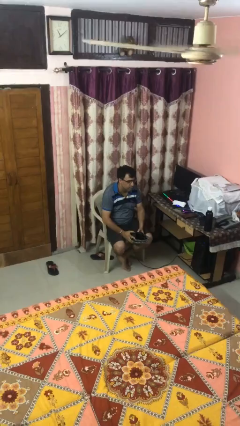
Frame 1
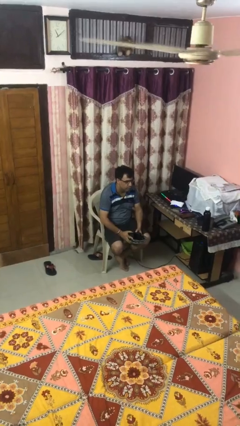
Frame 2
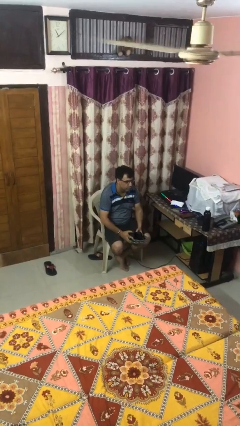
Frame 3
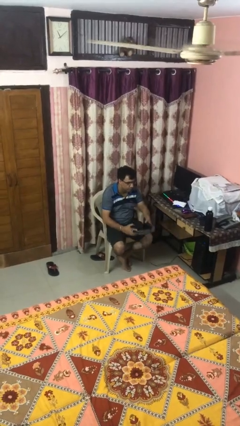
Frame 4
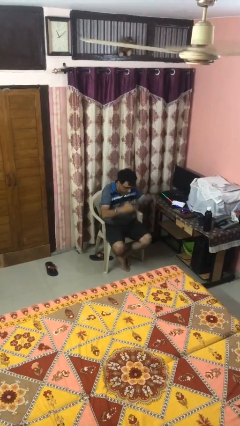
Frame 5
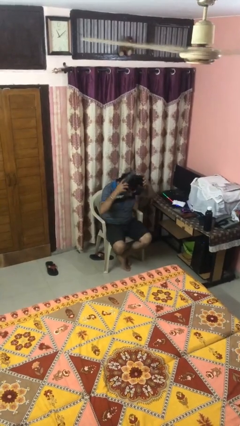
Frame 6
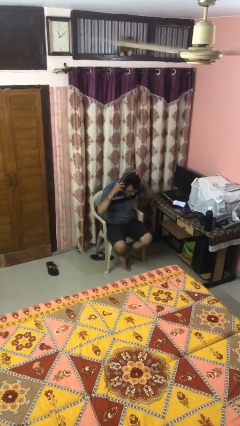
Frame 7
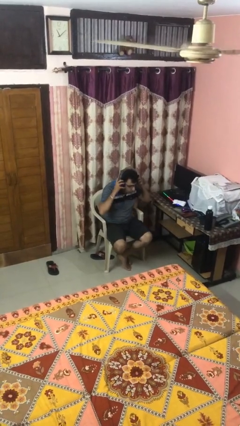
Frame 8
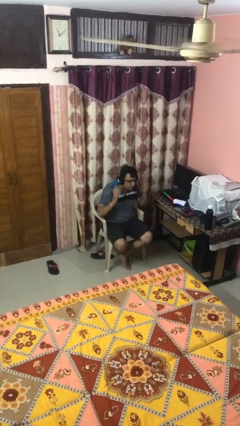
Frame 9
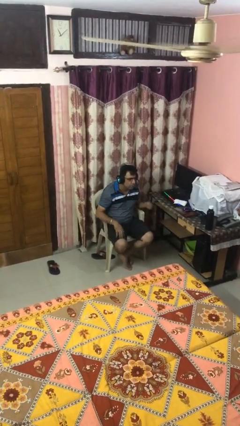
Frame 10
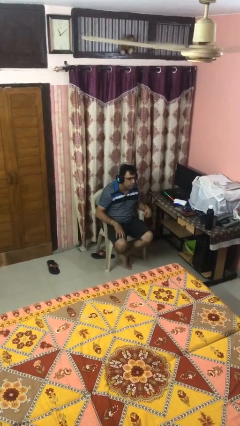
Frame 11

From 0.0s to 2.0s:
person puts on headphones

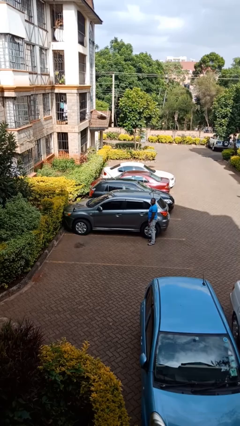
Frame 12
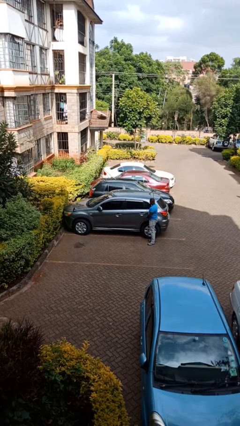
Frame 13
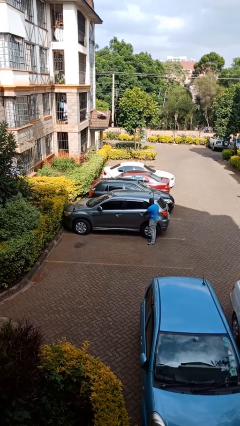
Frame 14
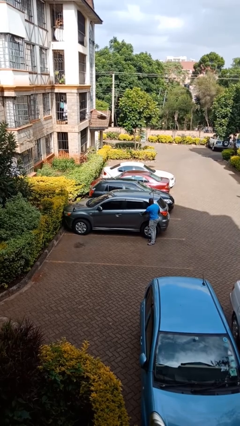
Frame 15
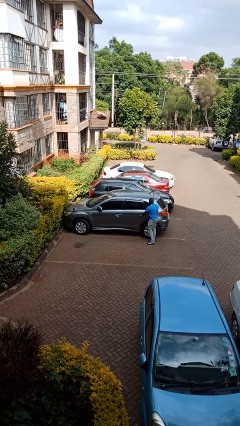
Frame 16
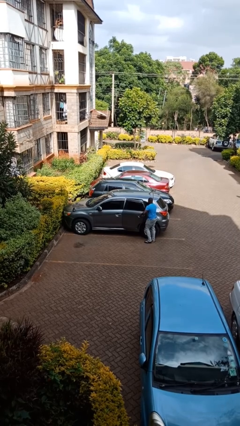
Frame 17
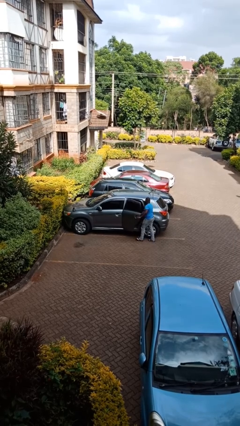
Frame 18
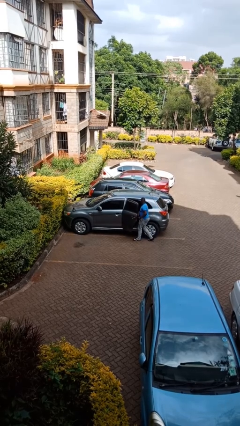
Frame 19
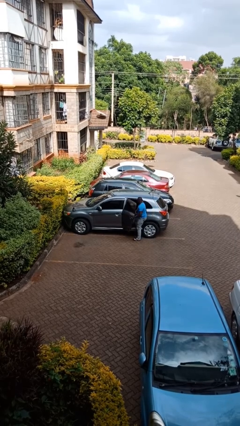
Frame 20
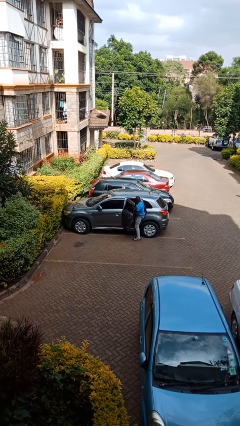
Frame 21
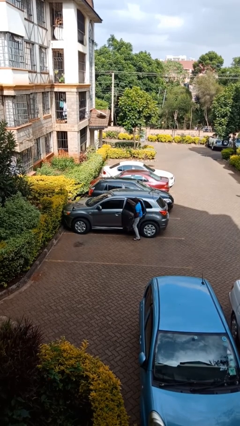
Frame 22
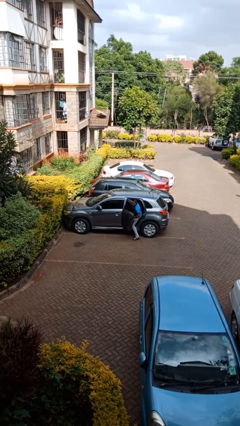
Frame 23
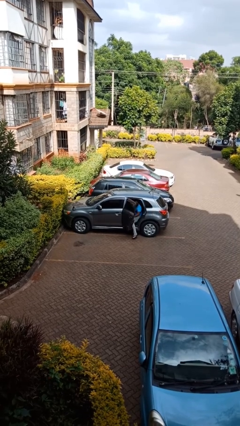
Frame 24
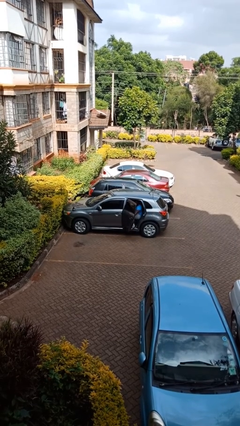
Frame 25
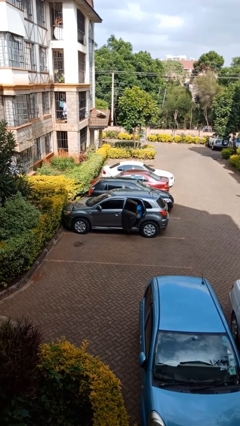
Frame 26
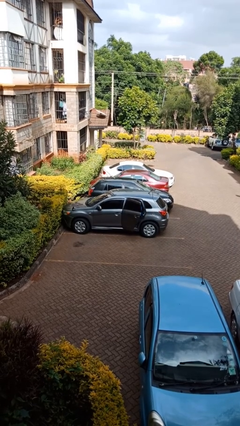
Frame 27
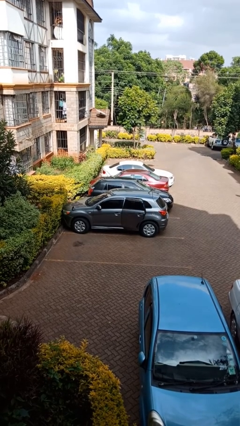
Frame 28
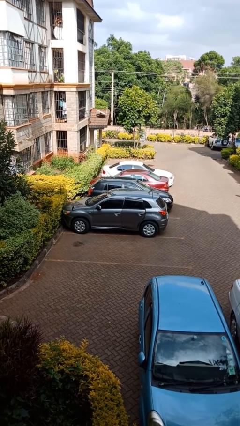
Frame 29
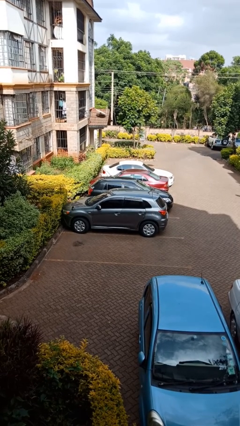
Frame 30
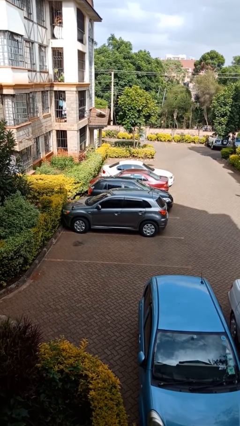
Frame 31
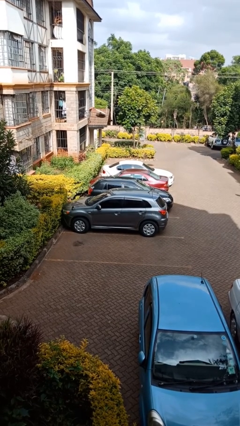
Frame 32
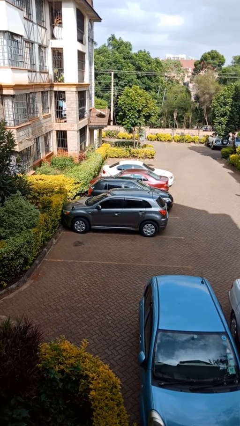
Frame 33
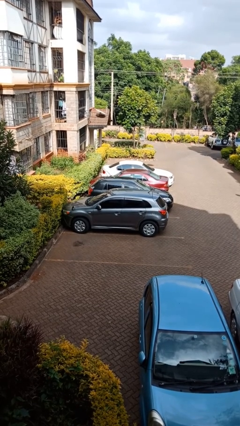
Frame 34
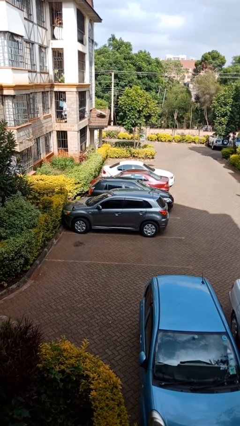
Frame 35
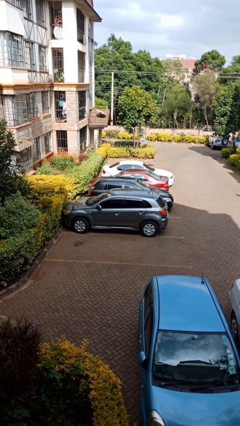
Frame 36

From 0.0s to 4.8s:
car picks up person

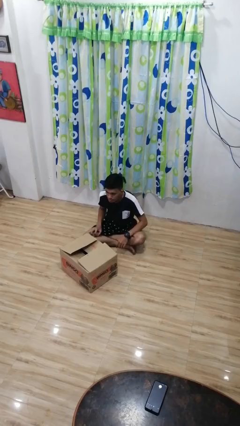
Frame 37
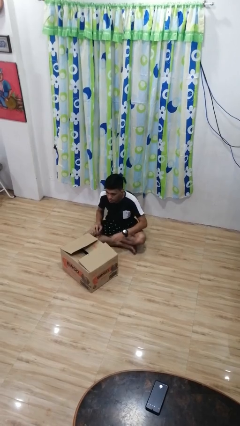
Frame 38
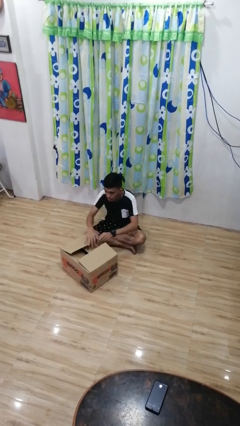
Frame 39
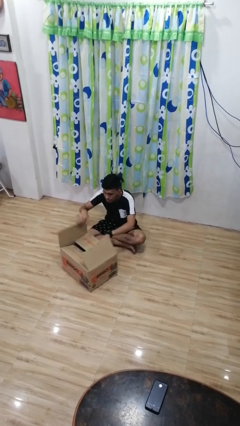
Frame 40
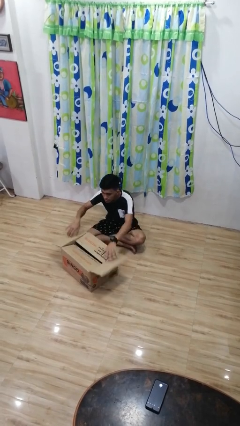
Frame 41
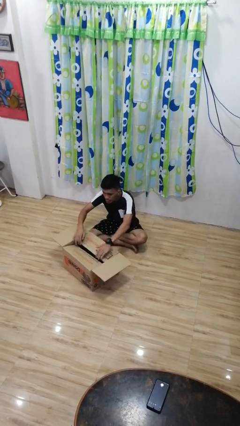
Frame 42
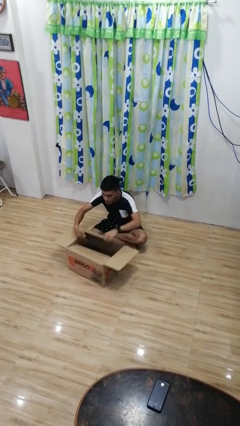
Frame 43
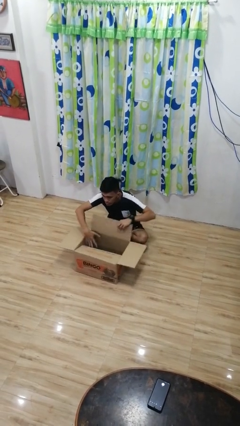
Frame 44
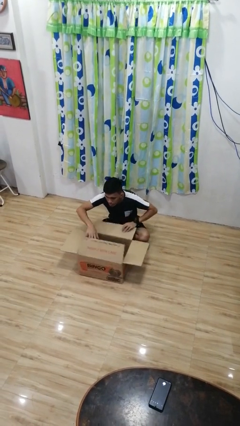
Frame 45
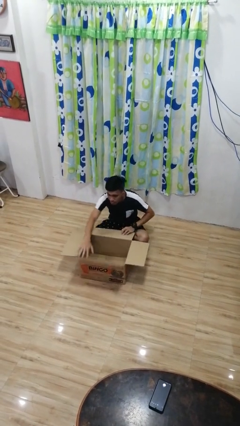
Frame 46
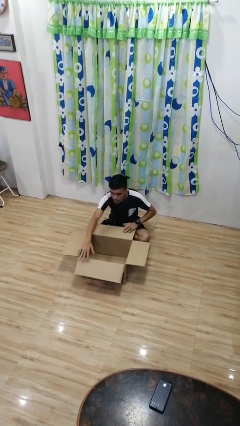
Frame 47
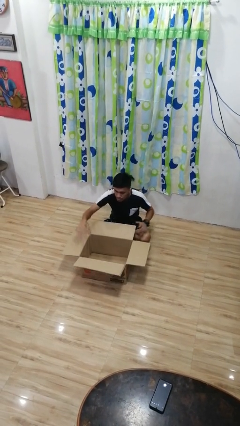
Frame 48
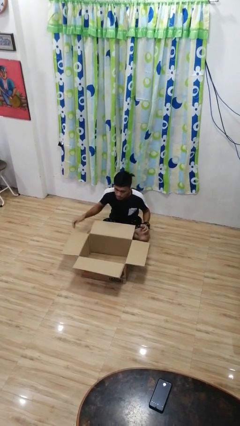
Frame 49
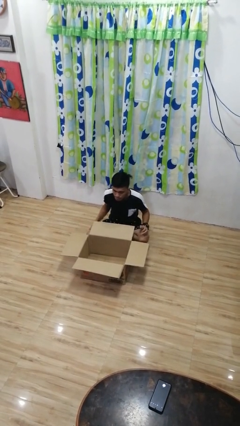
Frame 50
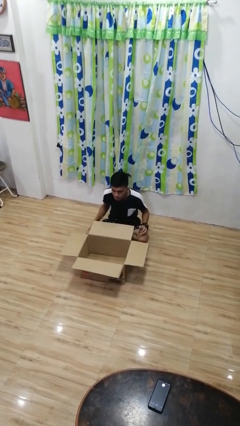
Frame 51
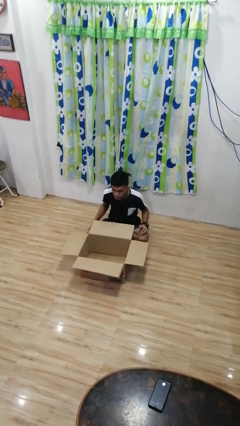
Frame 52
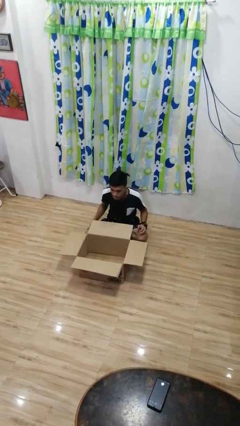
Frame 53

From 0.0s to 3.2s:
person opens box

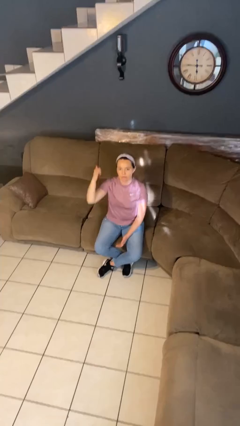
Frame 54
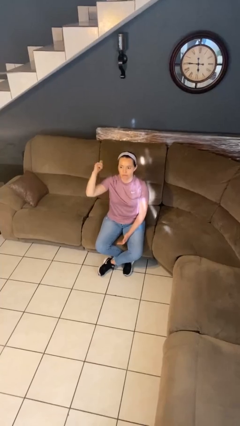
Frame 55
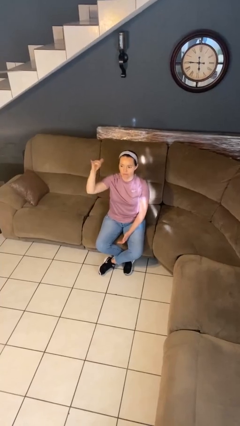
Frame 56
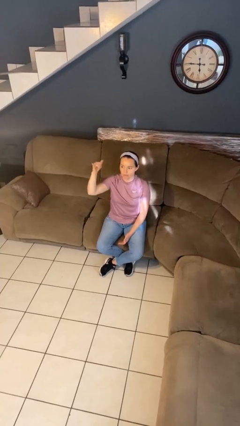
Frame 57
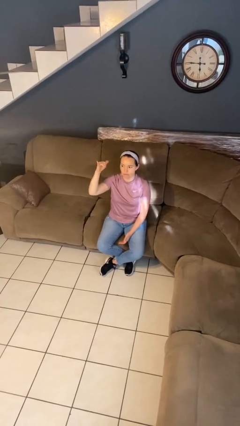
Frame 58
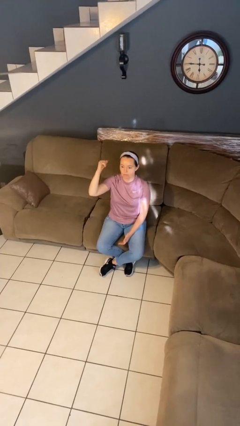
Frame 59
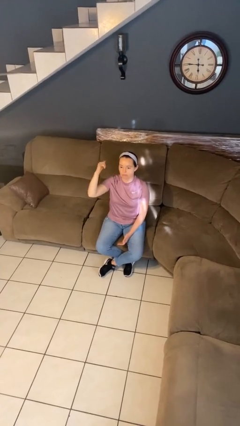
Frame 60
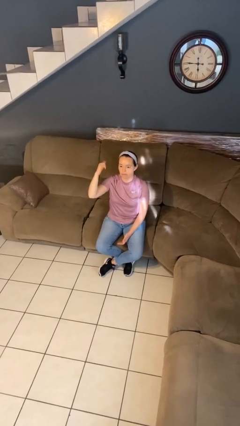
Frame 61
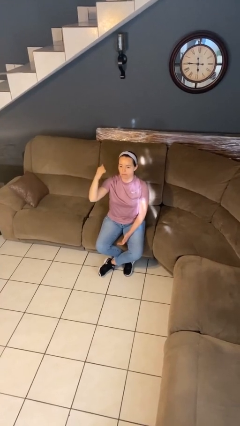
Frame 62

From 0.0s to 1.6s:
person gestures hang loose

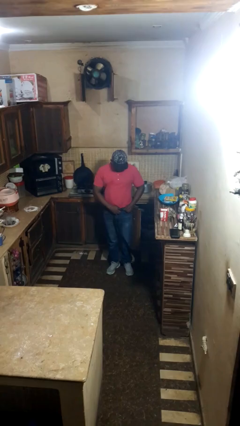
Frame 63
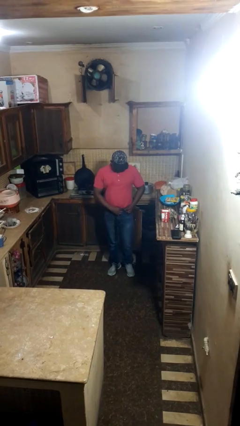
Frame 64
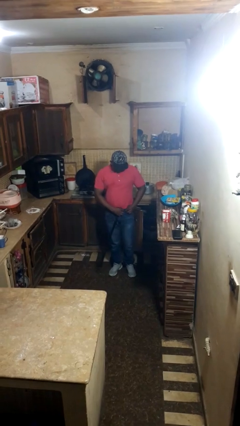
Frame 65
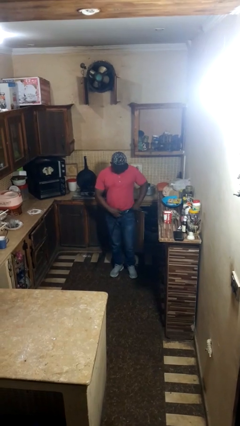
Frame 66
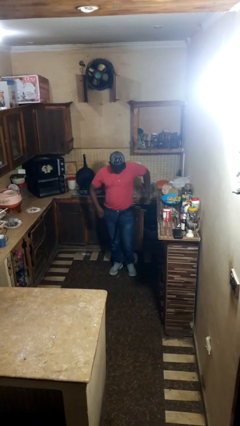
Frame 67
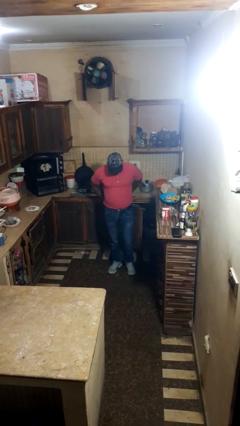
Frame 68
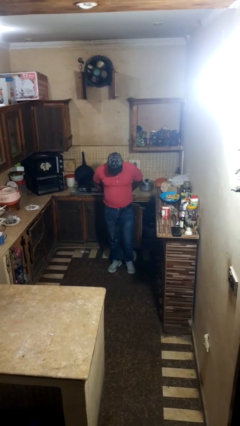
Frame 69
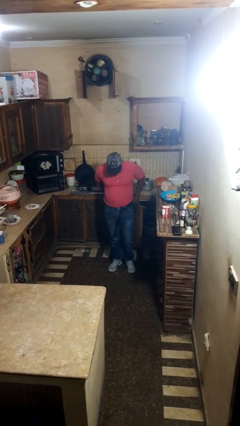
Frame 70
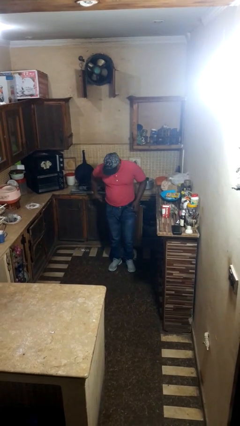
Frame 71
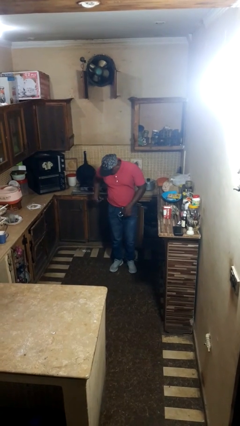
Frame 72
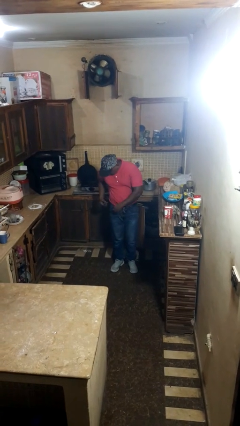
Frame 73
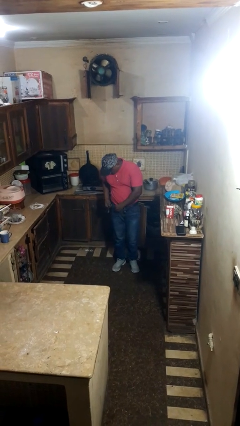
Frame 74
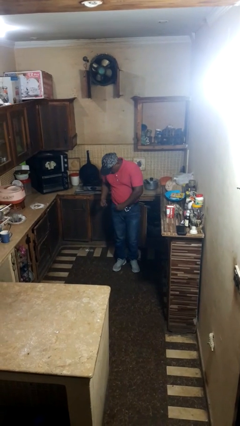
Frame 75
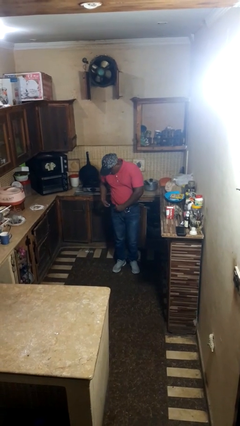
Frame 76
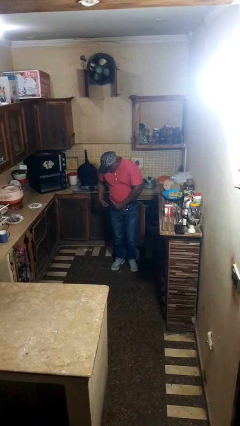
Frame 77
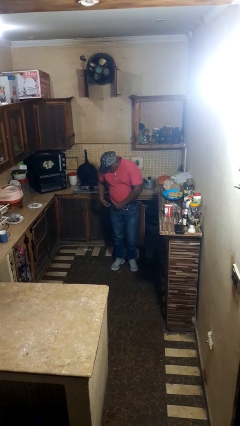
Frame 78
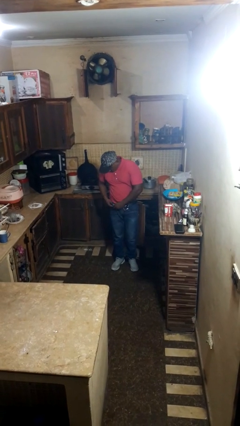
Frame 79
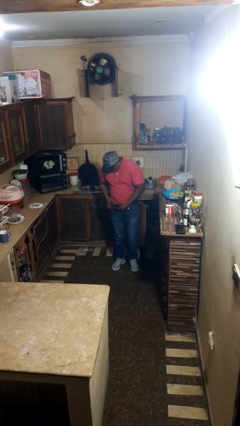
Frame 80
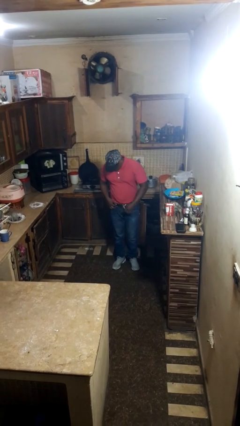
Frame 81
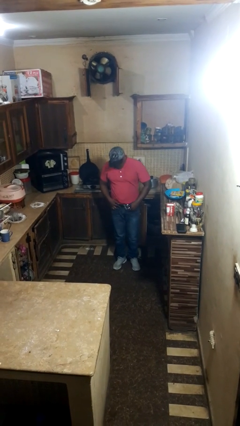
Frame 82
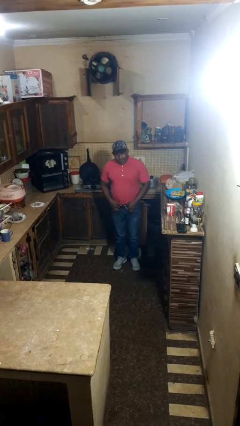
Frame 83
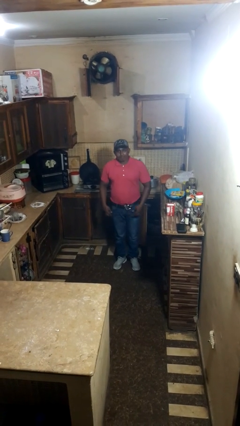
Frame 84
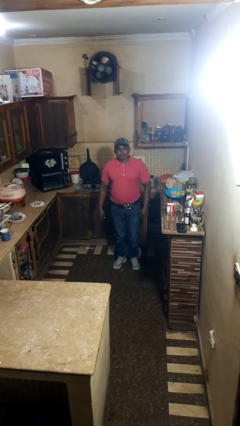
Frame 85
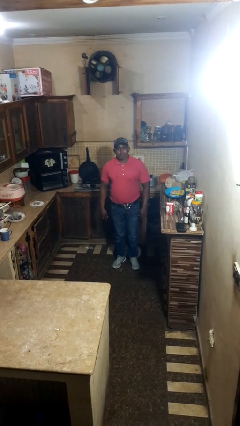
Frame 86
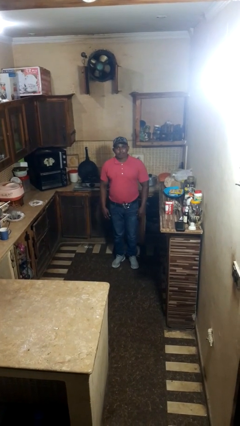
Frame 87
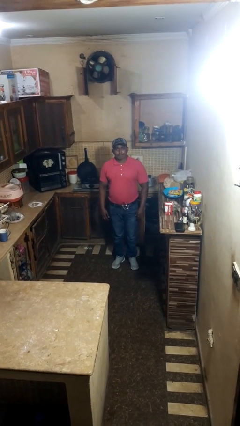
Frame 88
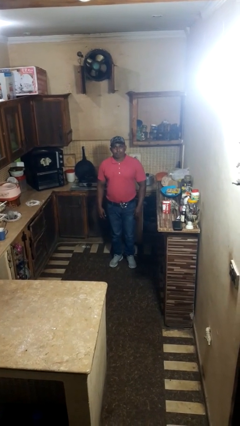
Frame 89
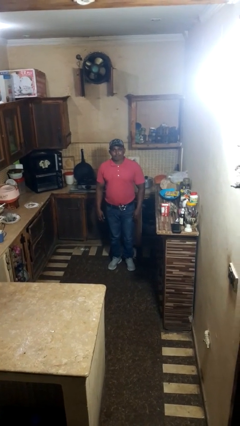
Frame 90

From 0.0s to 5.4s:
person puts on belt

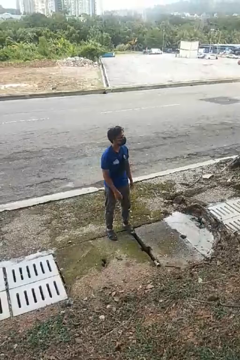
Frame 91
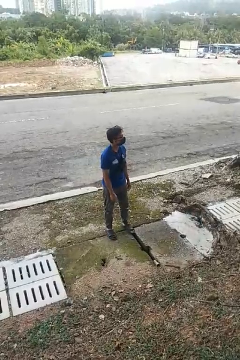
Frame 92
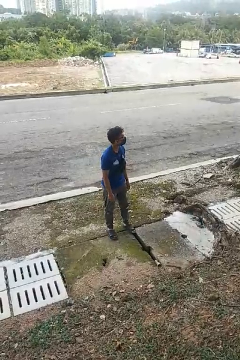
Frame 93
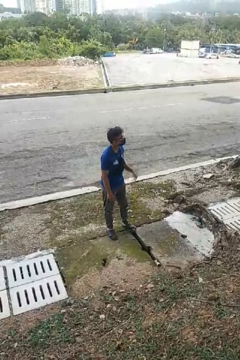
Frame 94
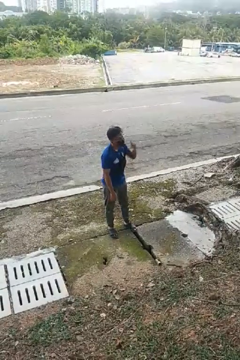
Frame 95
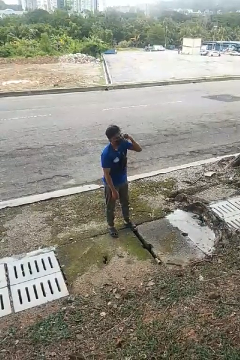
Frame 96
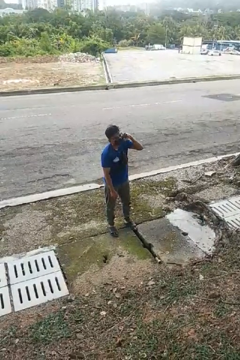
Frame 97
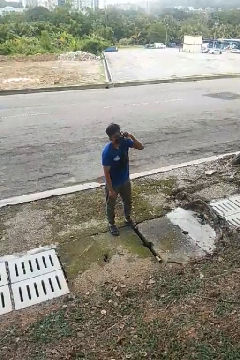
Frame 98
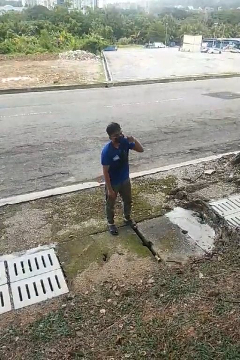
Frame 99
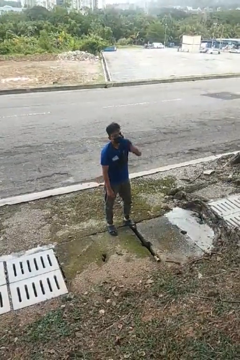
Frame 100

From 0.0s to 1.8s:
person gestures call me
